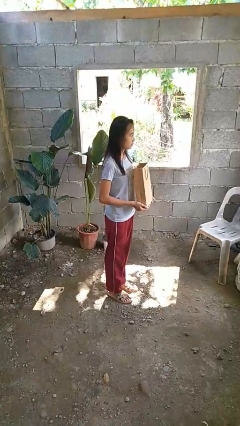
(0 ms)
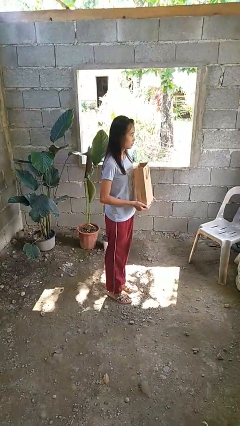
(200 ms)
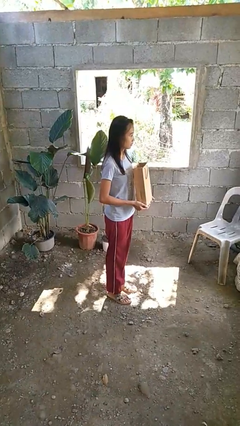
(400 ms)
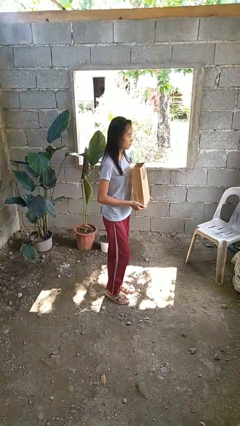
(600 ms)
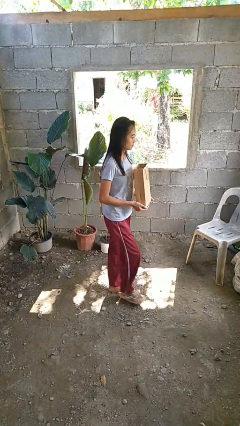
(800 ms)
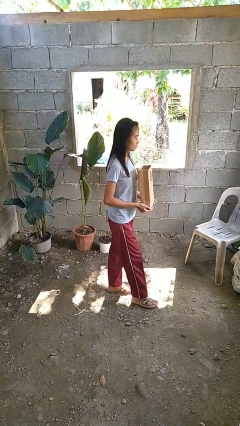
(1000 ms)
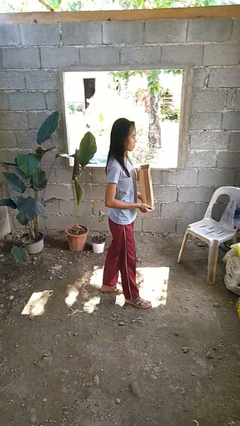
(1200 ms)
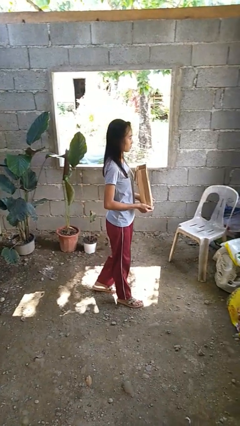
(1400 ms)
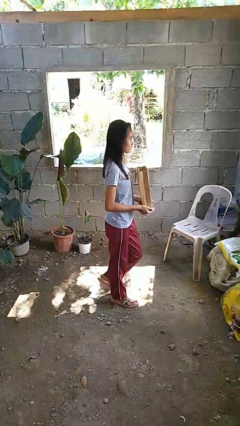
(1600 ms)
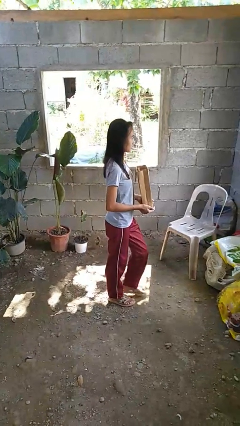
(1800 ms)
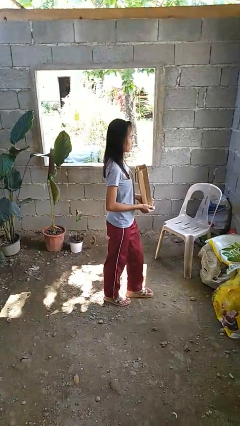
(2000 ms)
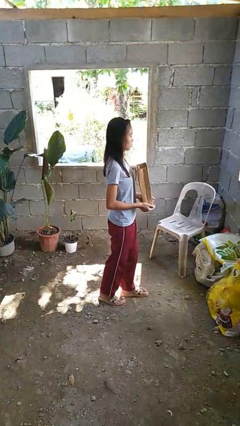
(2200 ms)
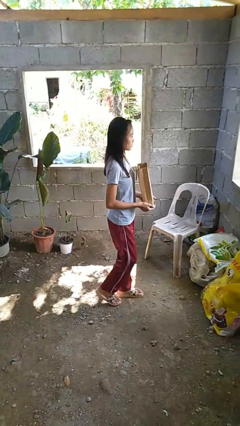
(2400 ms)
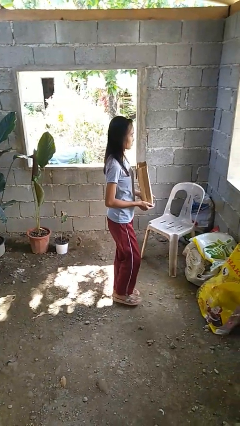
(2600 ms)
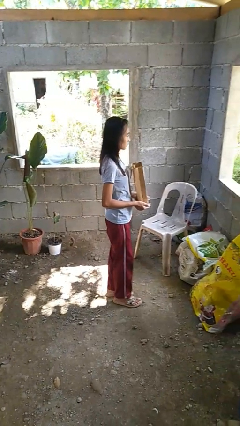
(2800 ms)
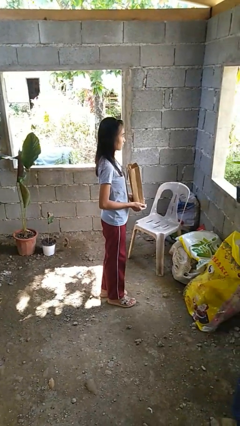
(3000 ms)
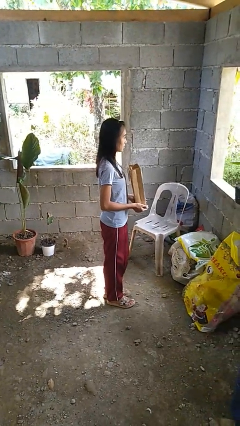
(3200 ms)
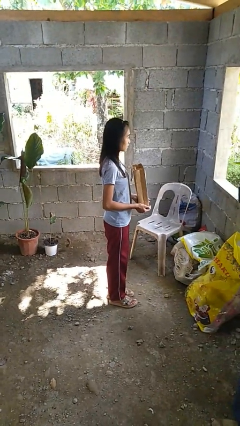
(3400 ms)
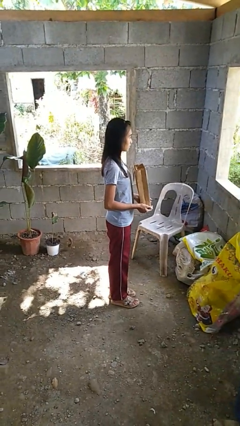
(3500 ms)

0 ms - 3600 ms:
person carries groceries

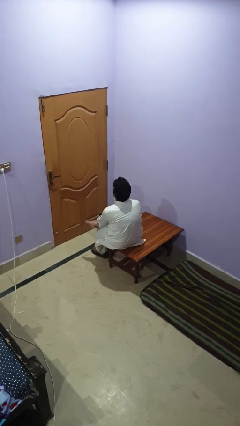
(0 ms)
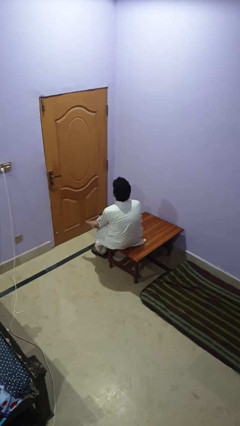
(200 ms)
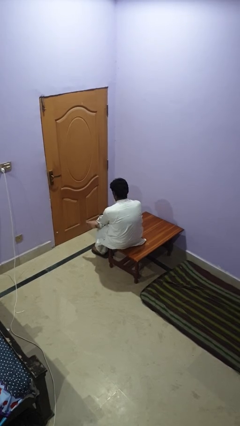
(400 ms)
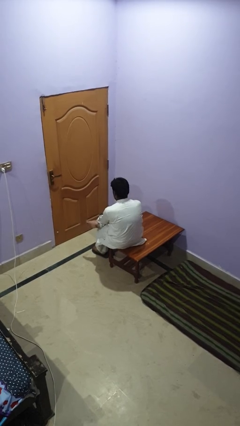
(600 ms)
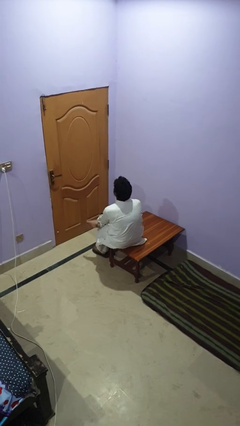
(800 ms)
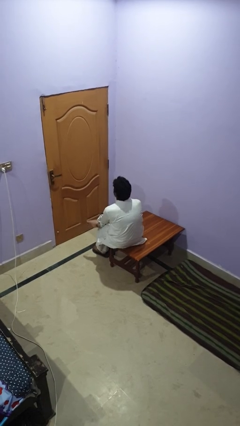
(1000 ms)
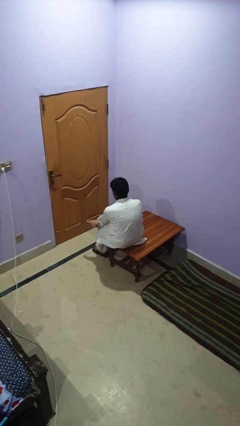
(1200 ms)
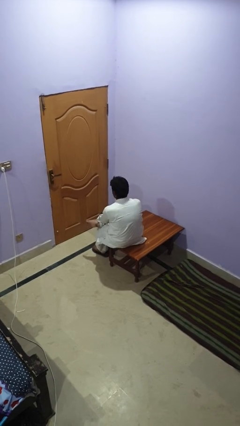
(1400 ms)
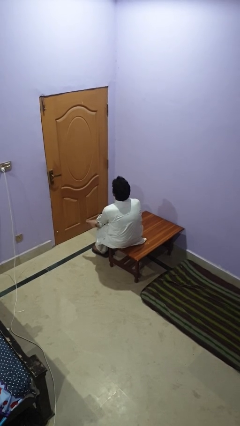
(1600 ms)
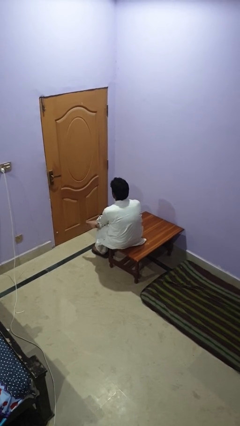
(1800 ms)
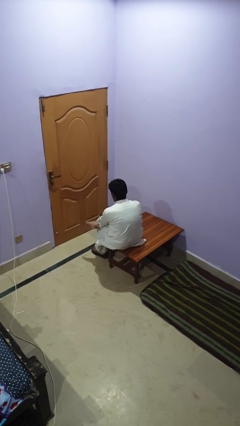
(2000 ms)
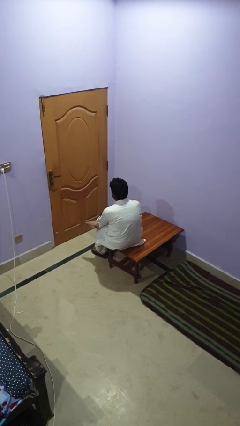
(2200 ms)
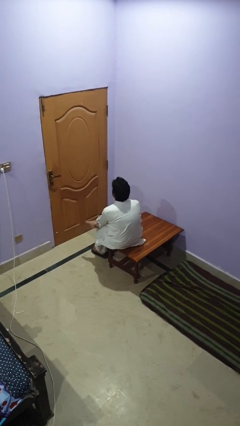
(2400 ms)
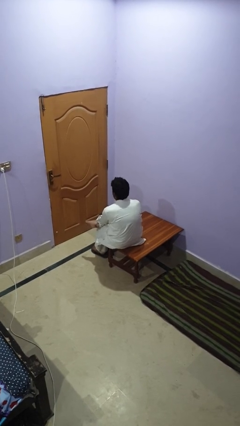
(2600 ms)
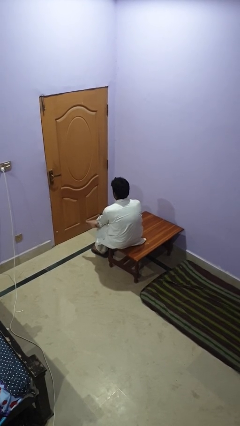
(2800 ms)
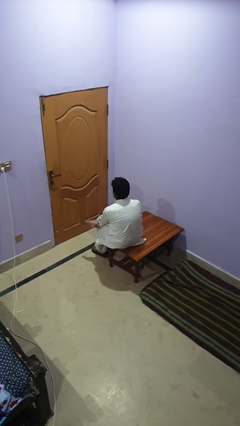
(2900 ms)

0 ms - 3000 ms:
person nods head

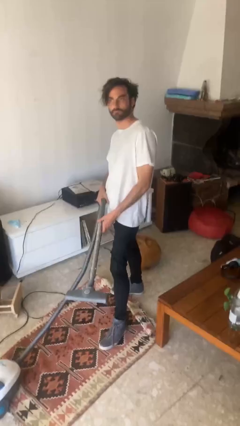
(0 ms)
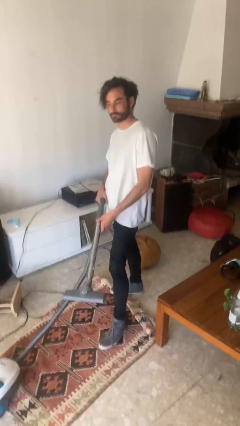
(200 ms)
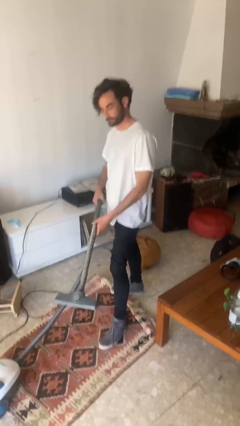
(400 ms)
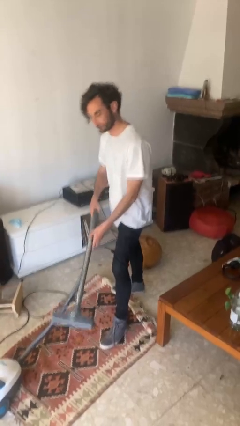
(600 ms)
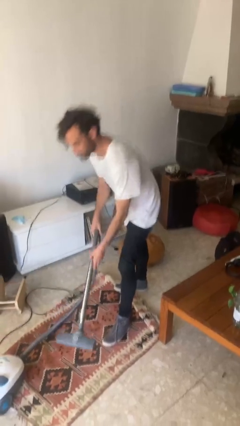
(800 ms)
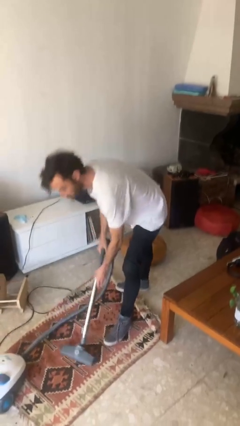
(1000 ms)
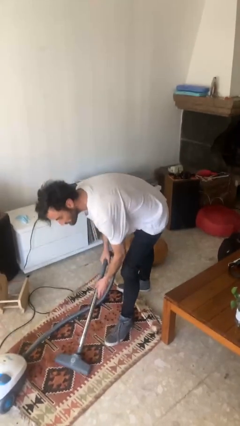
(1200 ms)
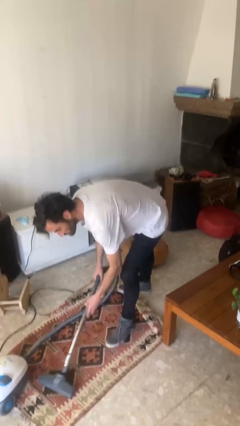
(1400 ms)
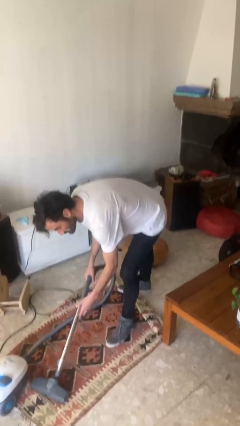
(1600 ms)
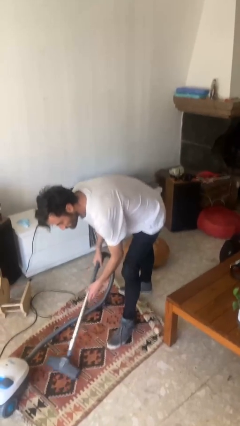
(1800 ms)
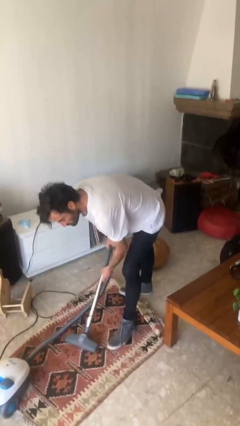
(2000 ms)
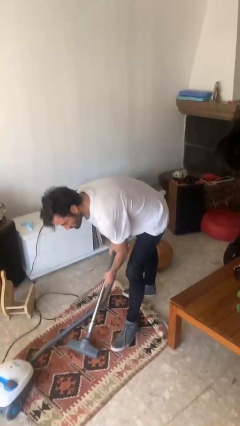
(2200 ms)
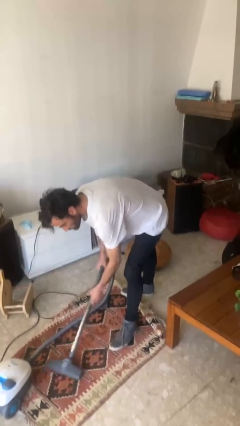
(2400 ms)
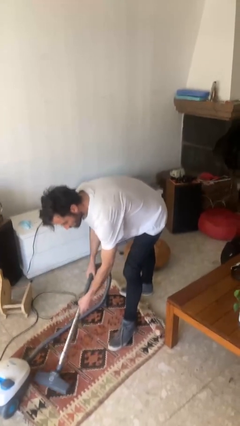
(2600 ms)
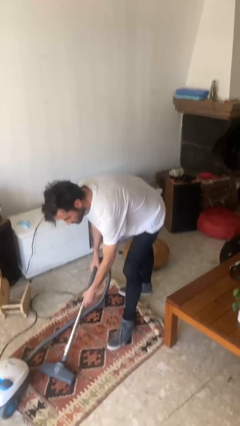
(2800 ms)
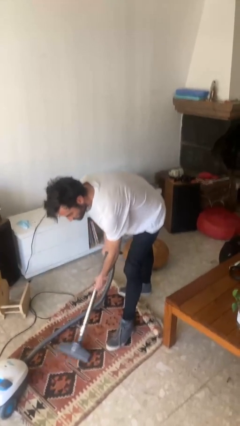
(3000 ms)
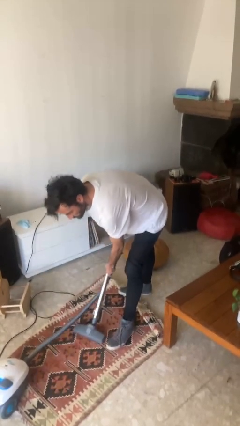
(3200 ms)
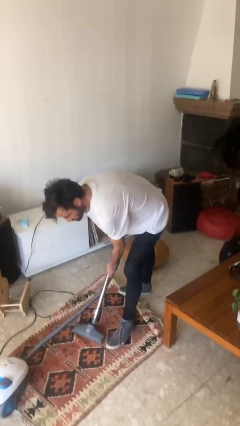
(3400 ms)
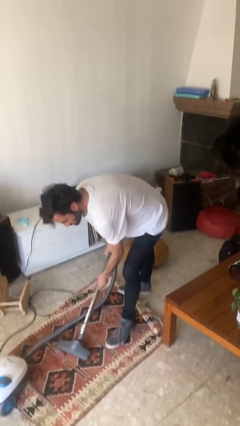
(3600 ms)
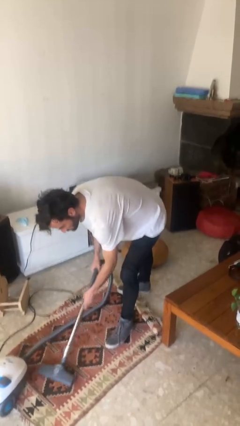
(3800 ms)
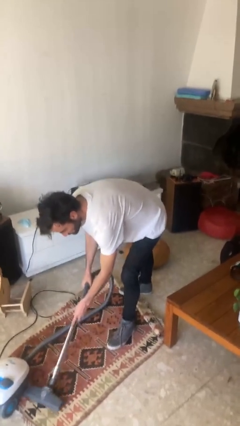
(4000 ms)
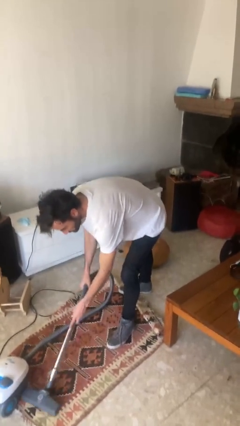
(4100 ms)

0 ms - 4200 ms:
person vacuums carpet

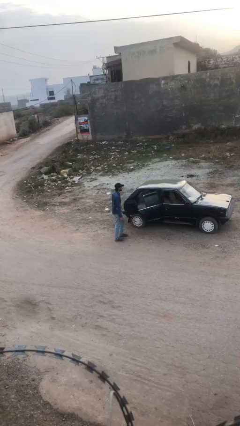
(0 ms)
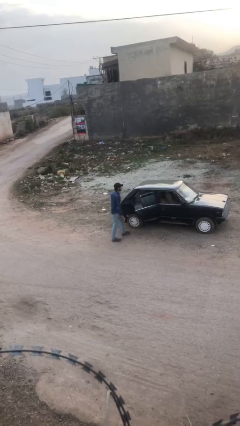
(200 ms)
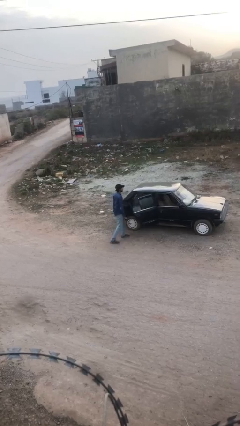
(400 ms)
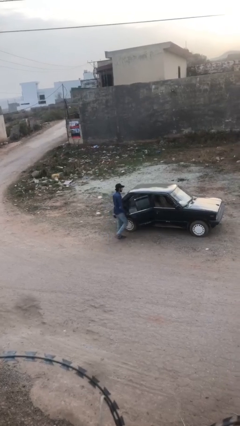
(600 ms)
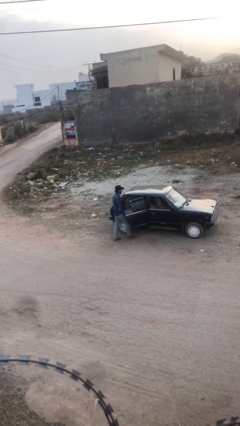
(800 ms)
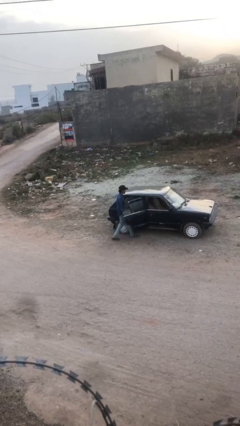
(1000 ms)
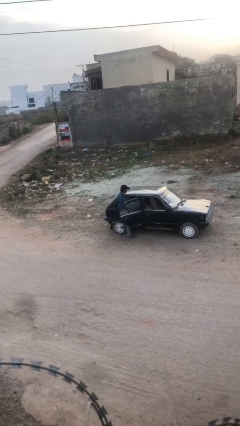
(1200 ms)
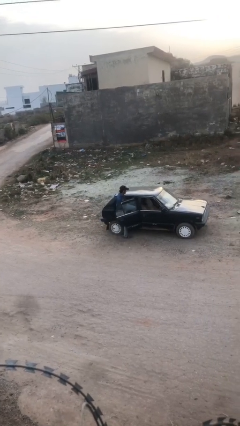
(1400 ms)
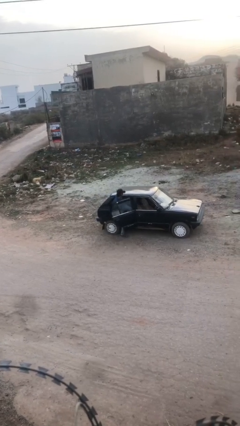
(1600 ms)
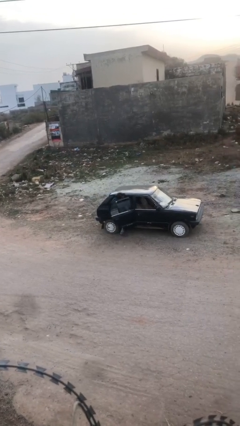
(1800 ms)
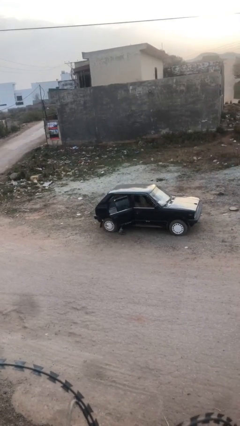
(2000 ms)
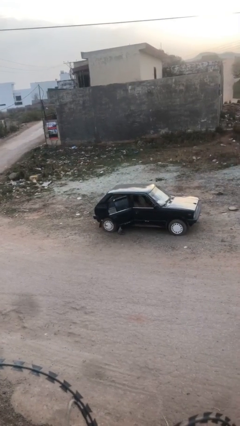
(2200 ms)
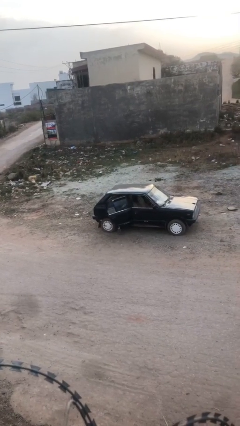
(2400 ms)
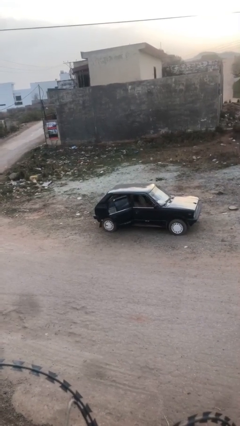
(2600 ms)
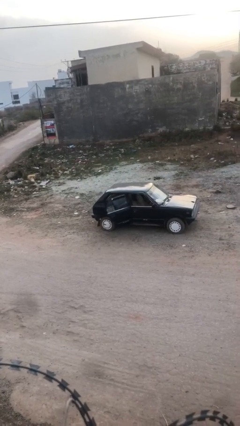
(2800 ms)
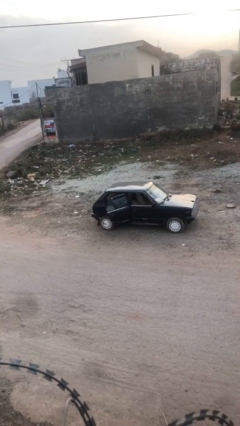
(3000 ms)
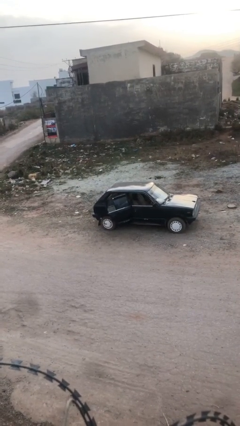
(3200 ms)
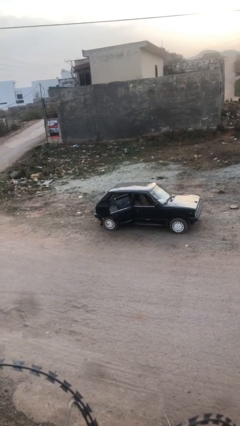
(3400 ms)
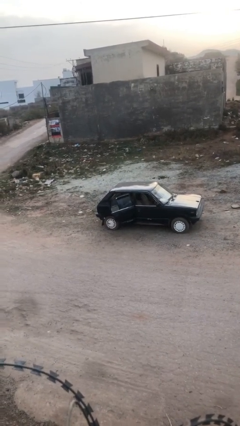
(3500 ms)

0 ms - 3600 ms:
person enters car

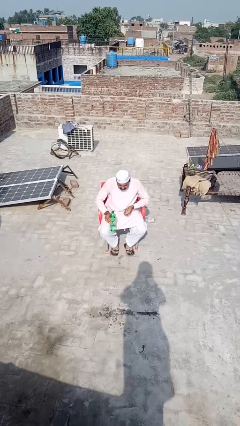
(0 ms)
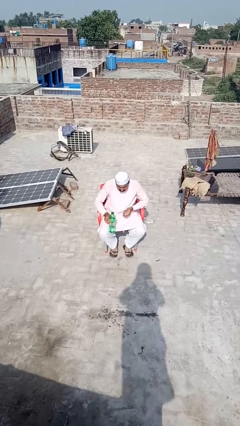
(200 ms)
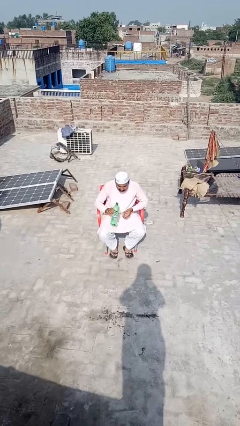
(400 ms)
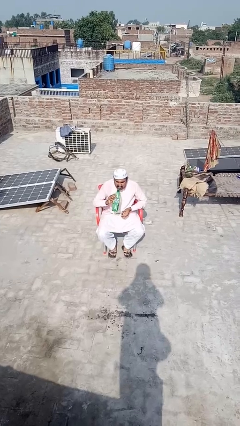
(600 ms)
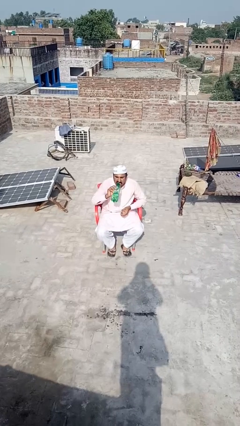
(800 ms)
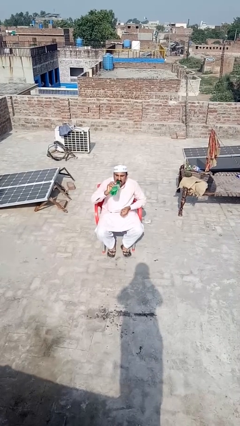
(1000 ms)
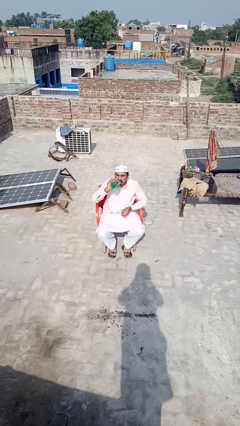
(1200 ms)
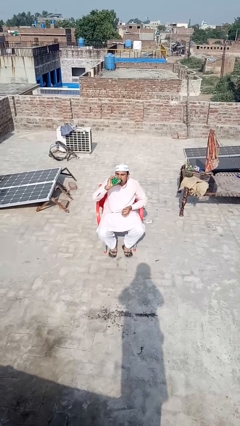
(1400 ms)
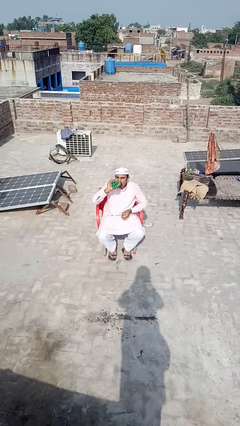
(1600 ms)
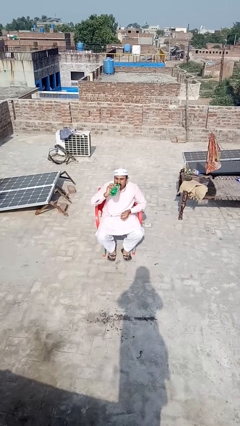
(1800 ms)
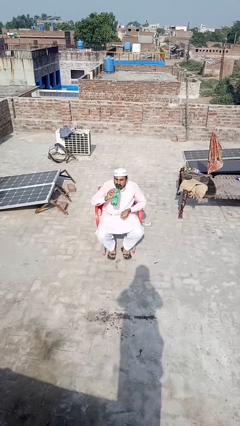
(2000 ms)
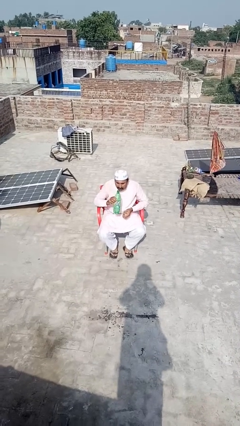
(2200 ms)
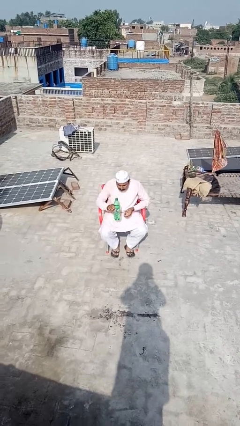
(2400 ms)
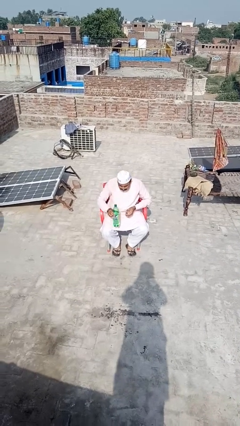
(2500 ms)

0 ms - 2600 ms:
person drinks from bottle

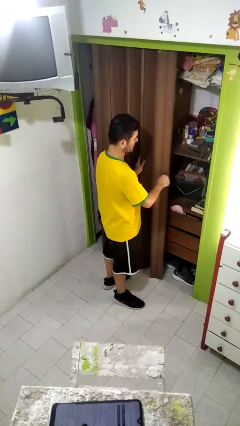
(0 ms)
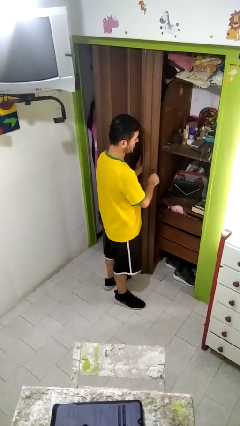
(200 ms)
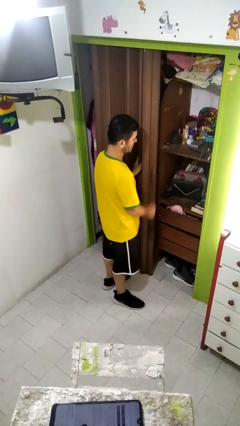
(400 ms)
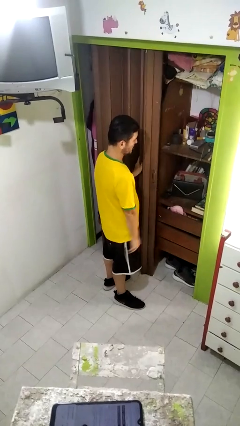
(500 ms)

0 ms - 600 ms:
person opens closet door
